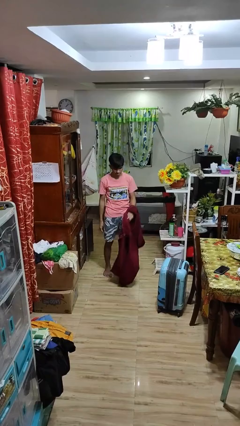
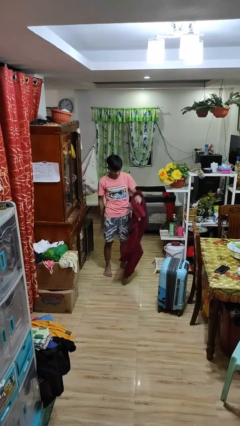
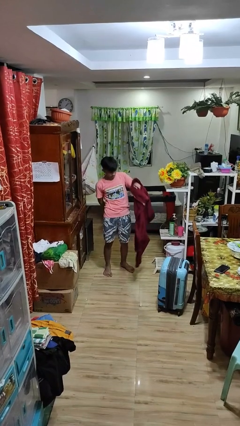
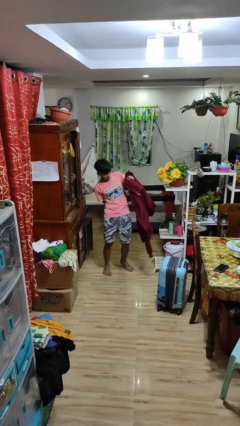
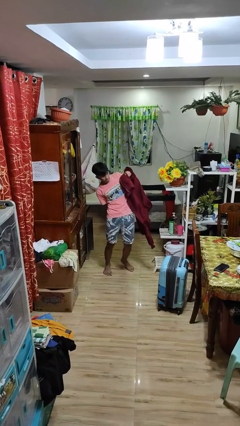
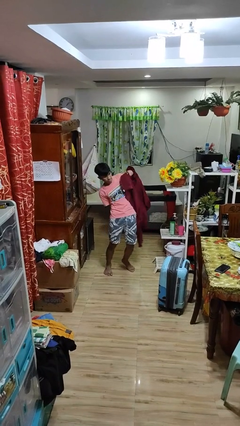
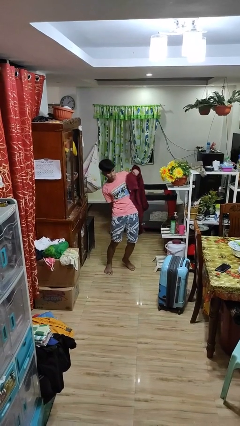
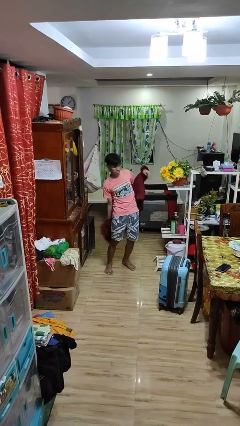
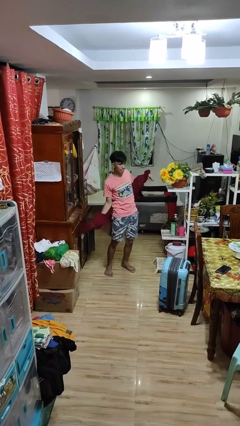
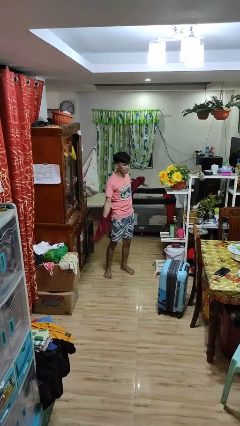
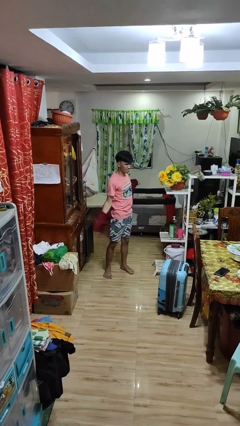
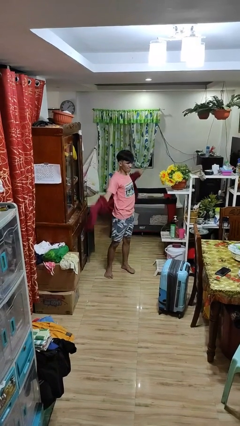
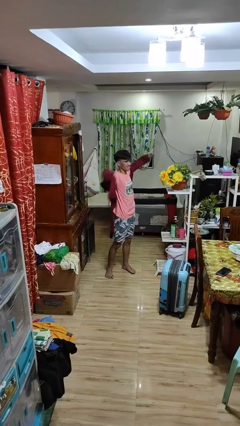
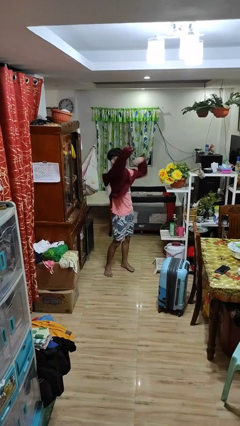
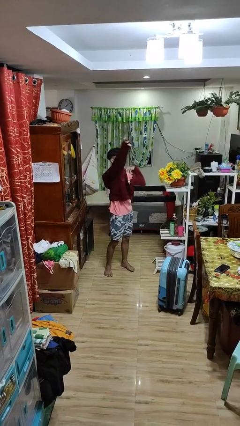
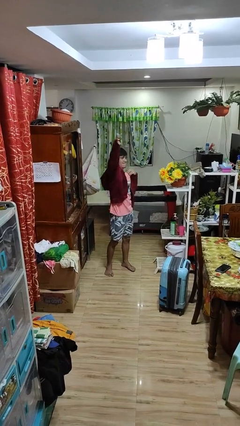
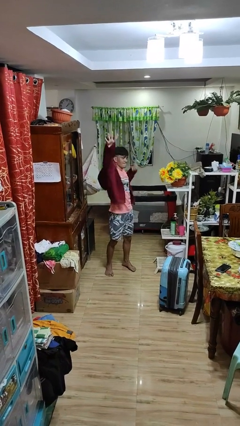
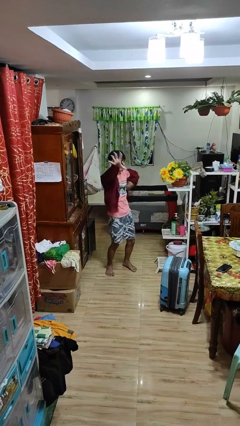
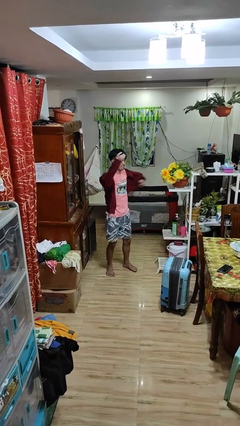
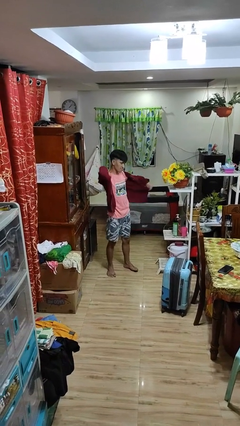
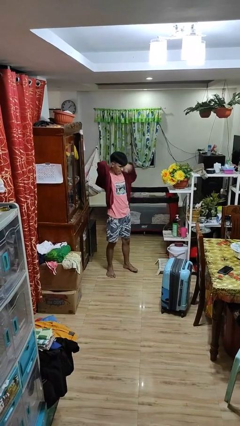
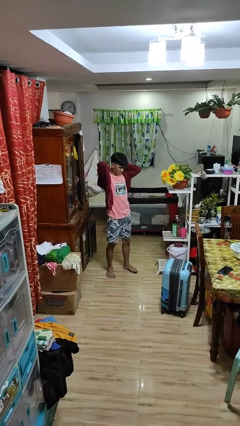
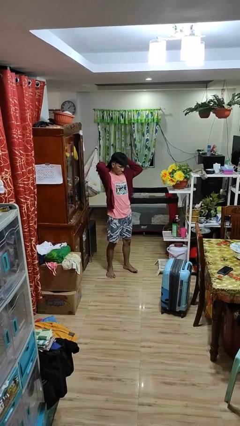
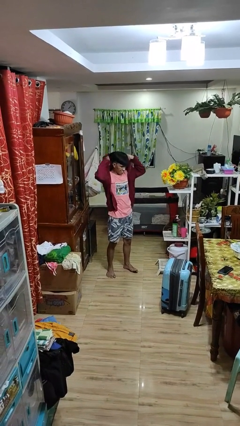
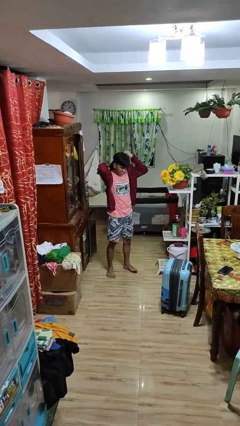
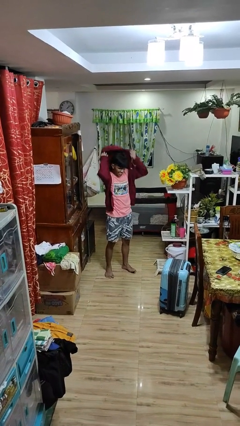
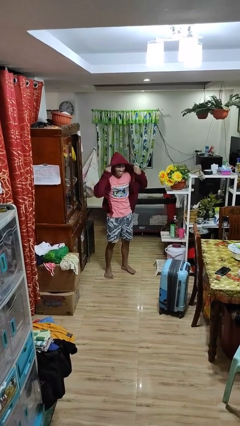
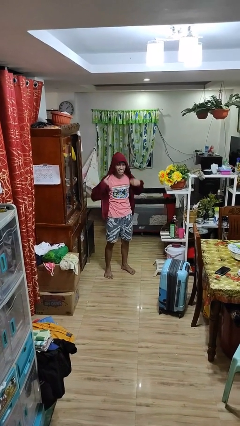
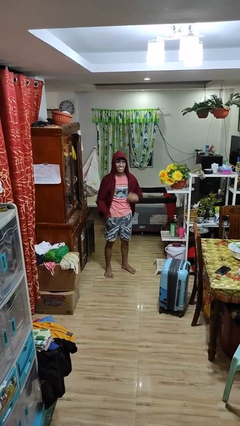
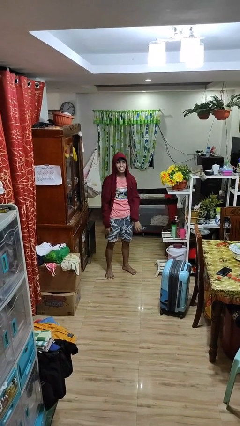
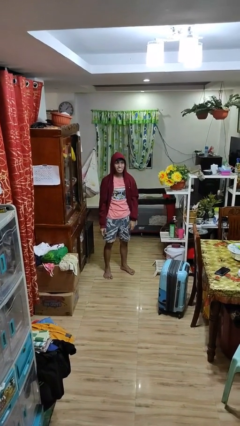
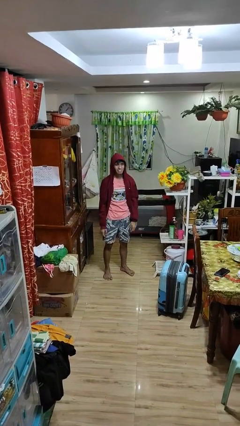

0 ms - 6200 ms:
person puts on hoodie

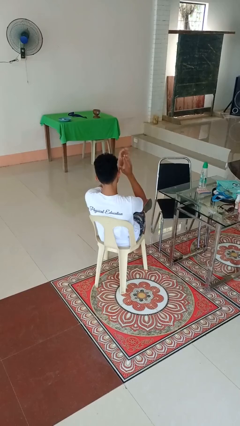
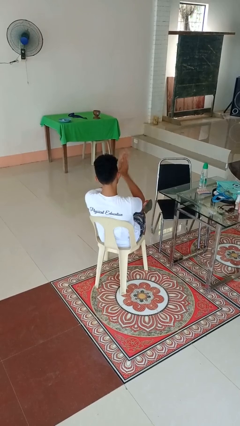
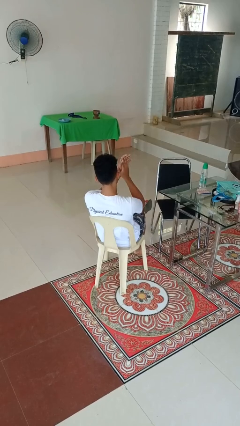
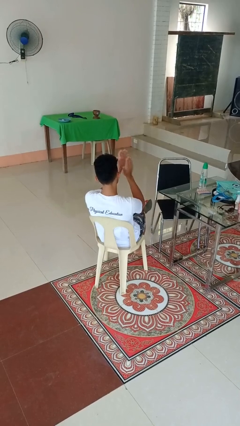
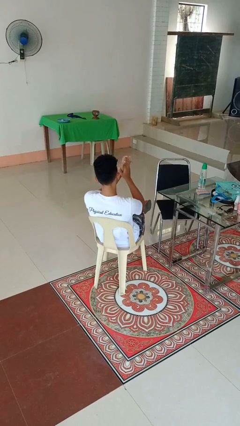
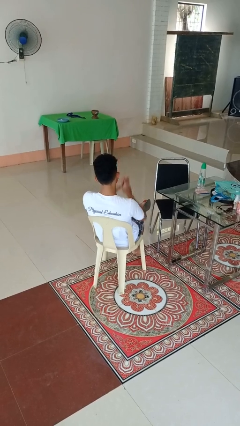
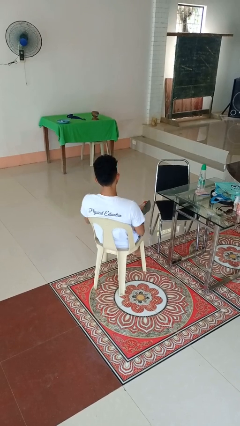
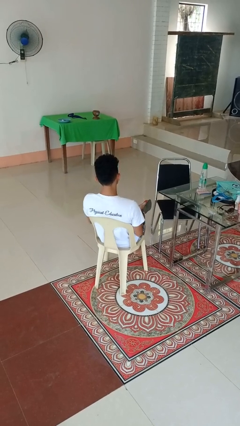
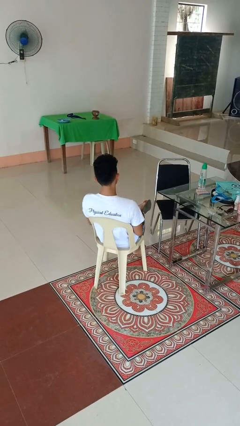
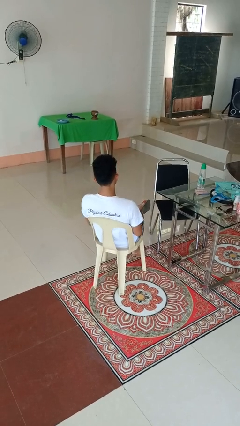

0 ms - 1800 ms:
person claps hands

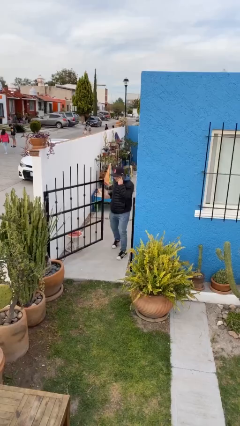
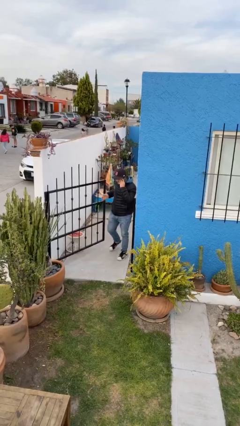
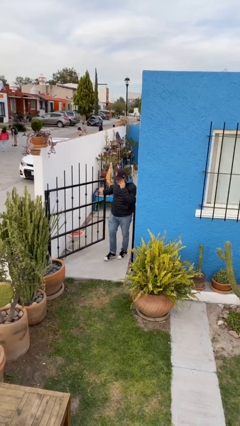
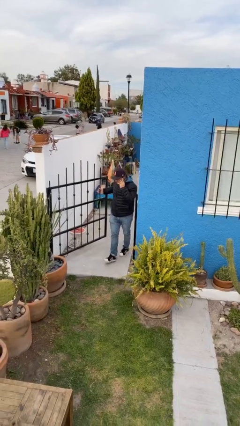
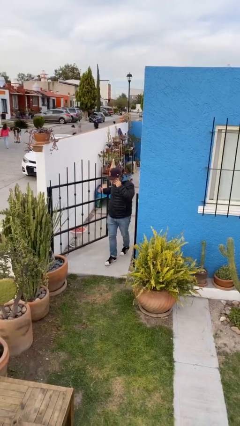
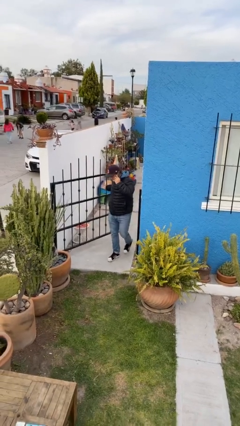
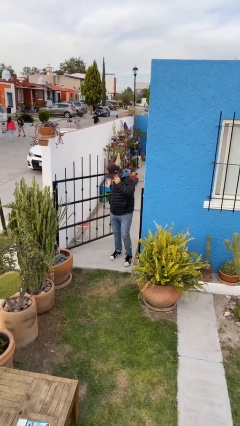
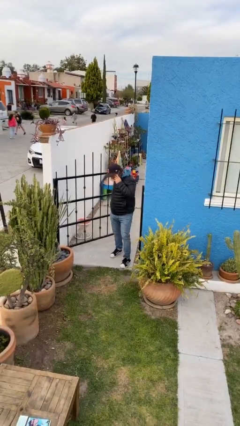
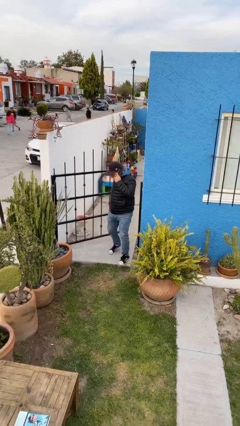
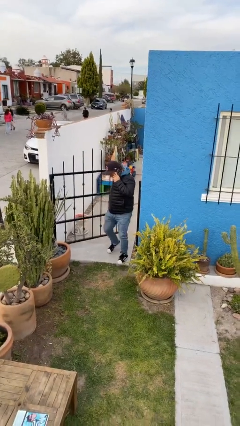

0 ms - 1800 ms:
person enters scene through structure

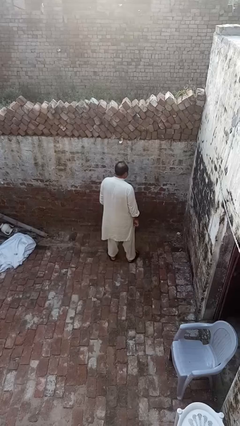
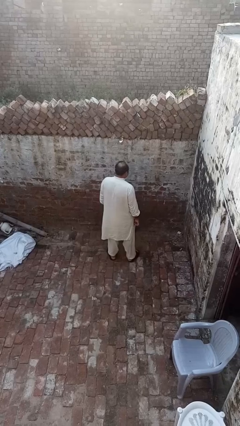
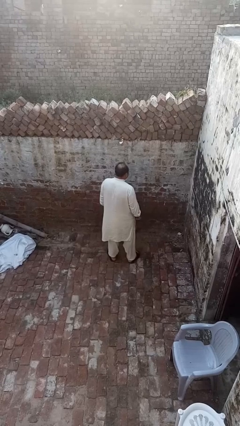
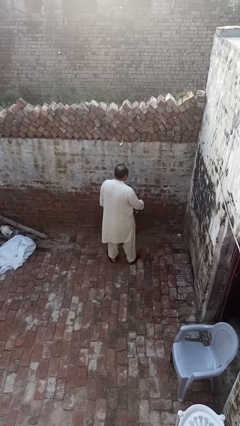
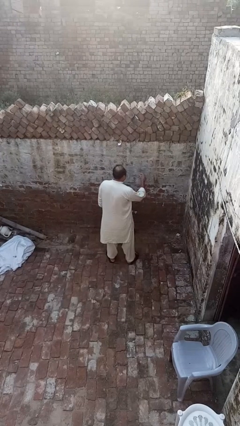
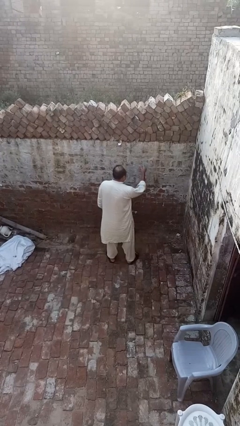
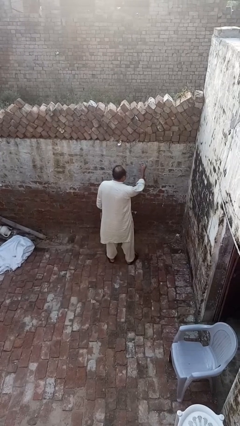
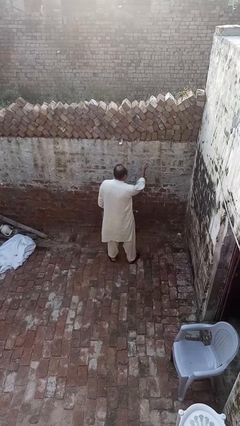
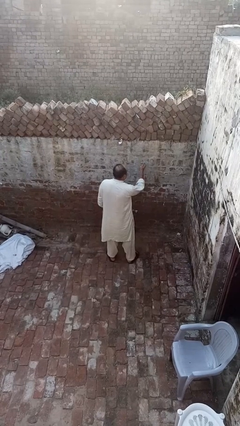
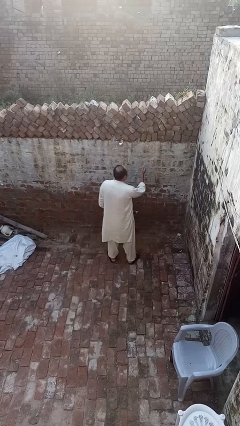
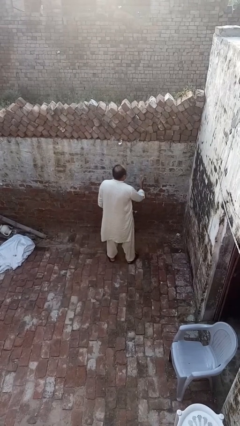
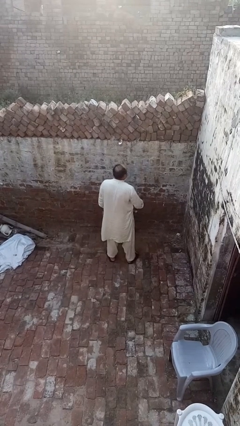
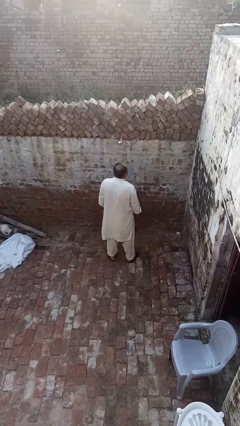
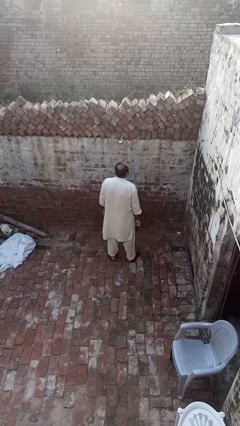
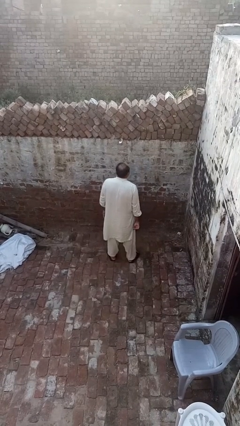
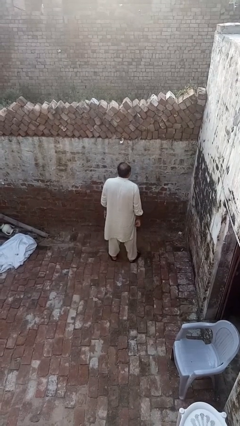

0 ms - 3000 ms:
person snaps fingers

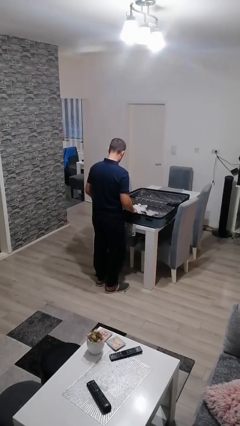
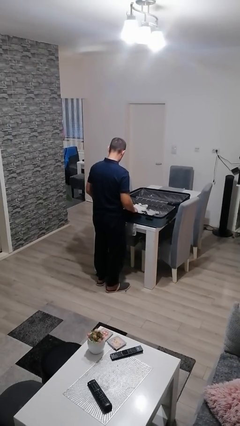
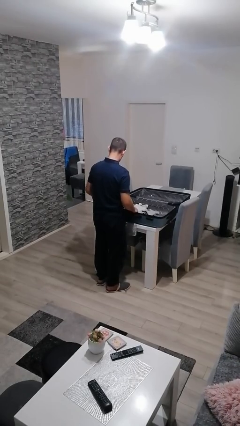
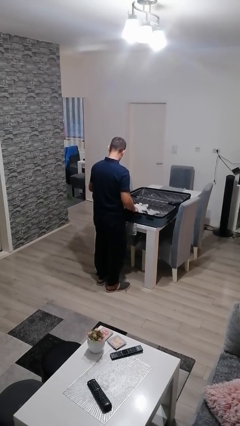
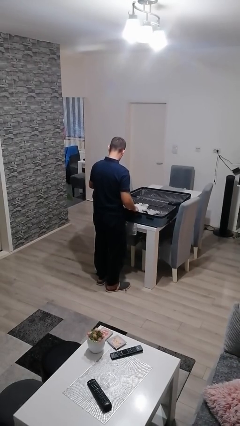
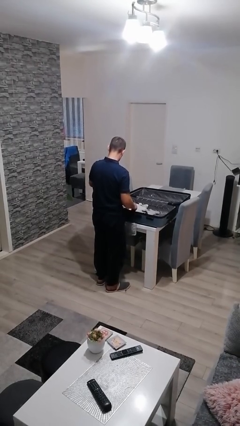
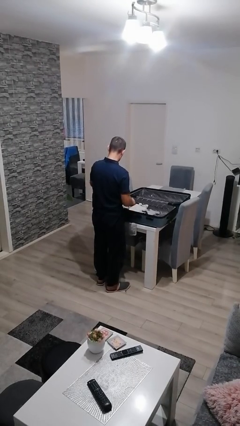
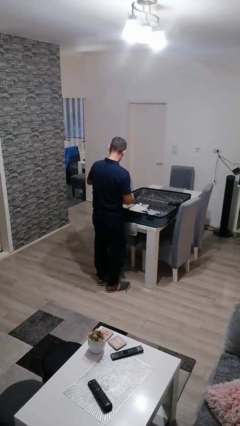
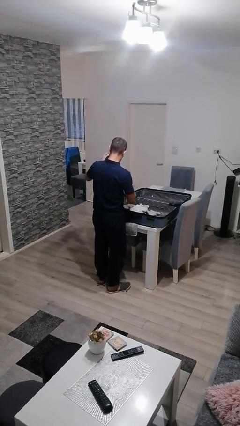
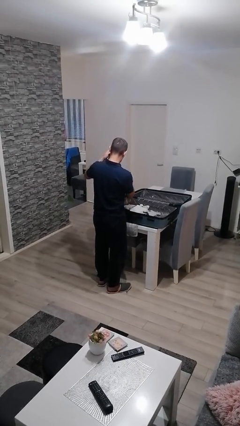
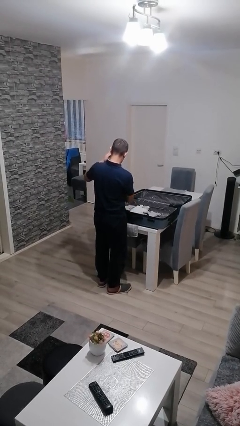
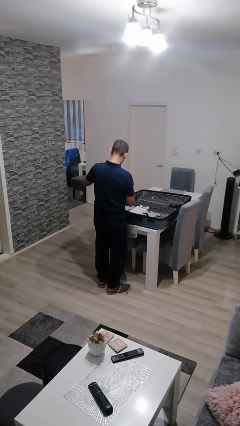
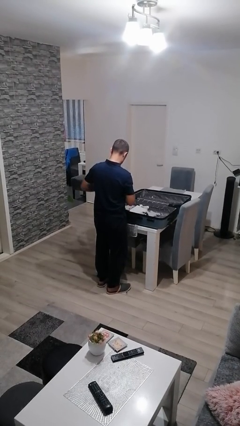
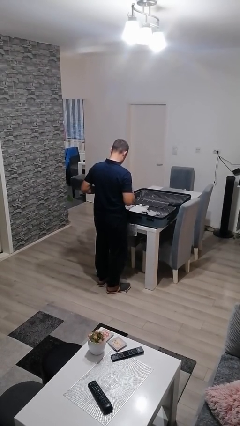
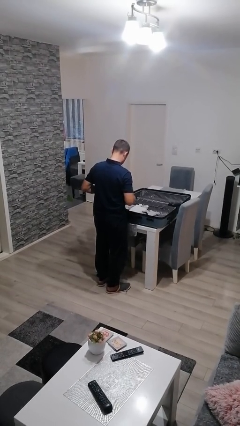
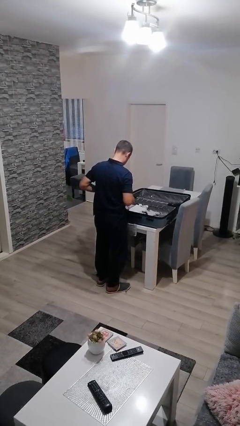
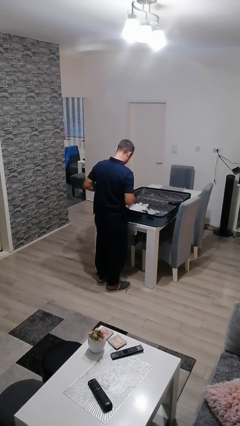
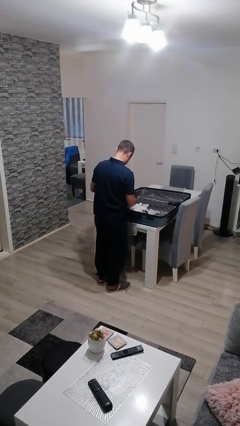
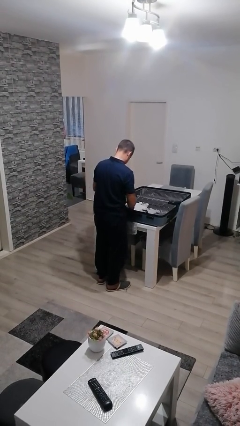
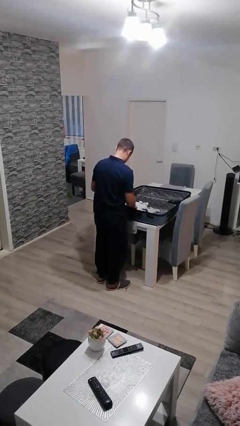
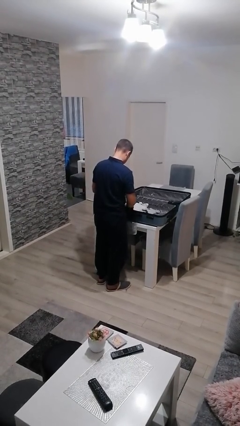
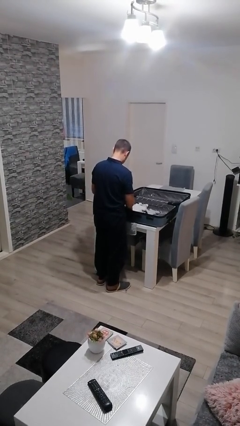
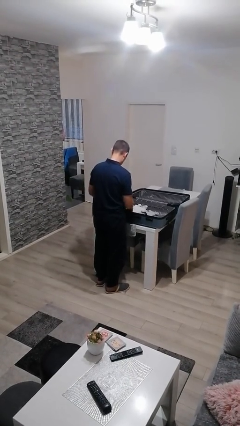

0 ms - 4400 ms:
person loads clothes into suitcase

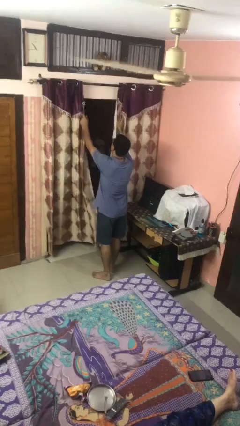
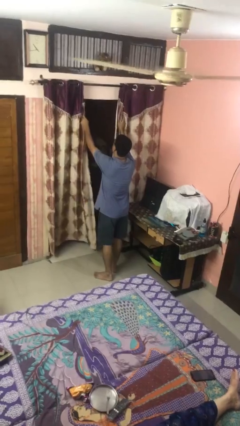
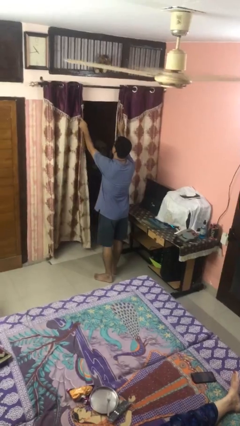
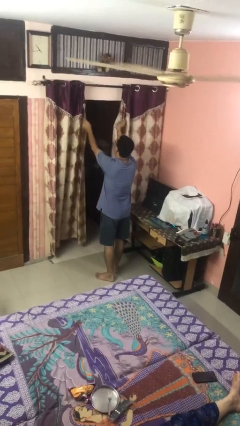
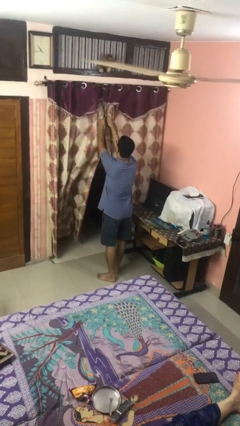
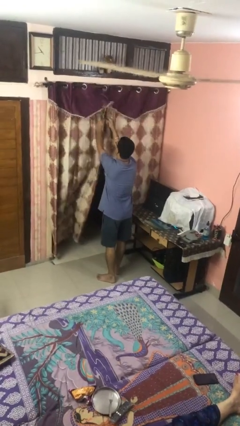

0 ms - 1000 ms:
person closes curtains
